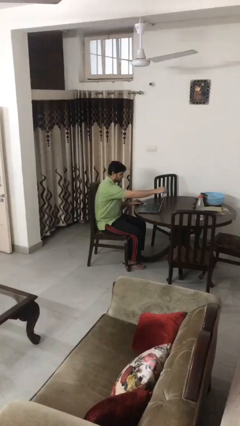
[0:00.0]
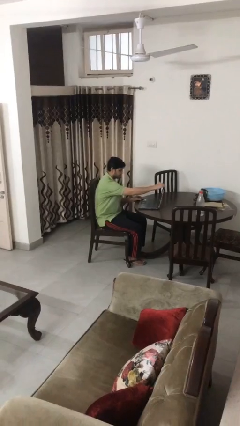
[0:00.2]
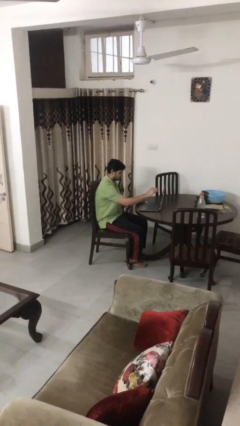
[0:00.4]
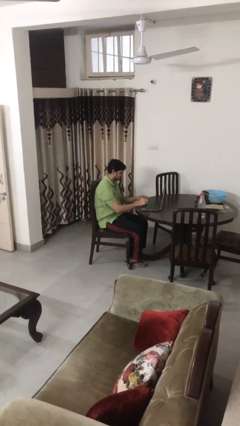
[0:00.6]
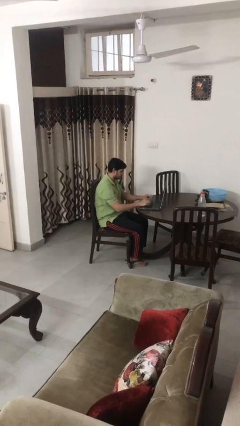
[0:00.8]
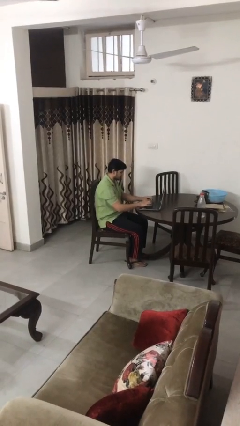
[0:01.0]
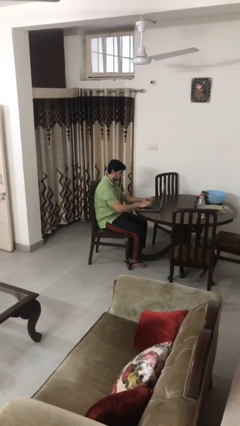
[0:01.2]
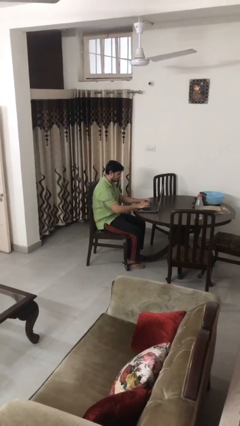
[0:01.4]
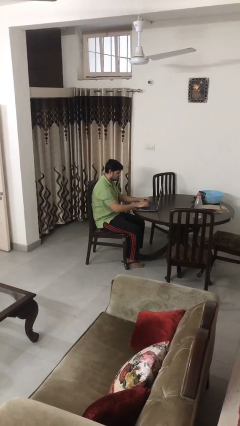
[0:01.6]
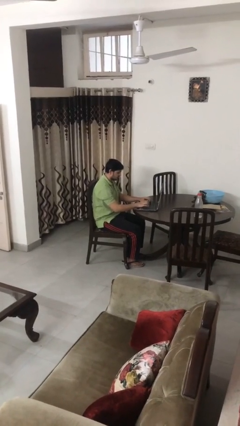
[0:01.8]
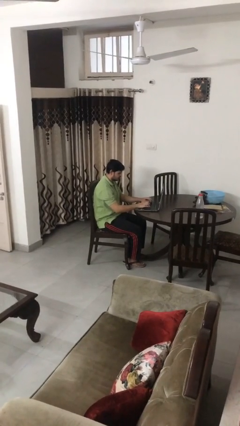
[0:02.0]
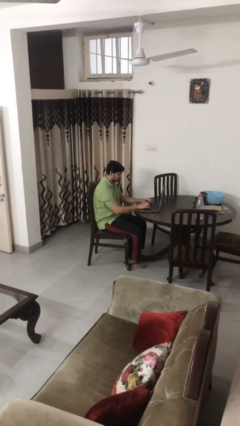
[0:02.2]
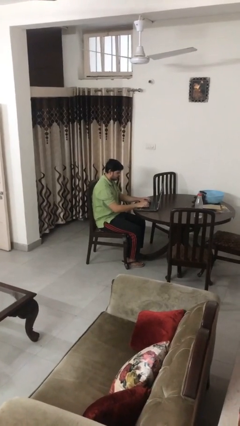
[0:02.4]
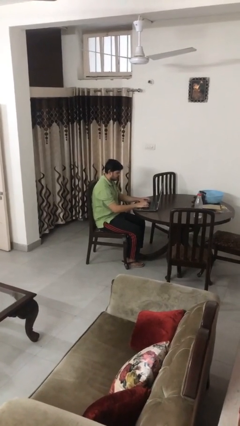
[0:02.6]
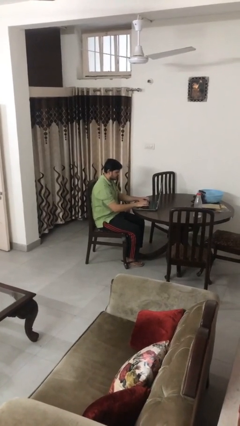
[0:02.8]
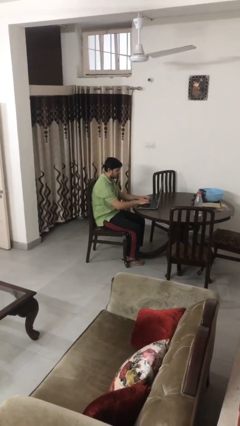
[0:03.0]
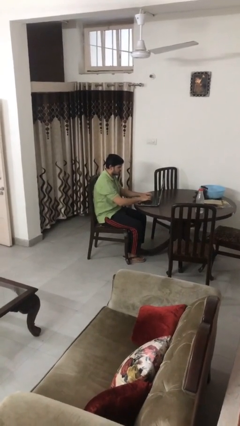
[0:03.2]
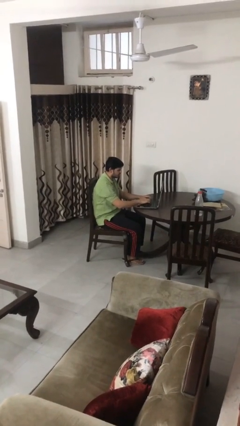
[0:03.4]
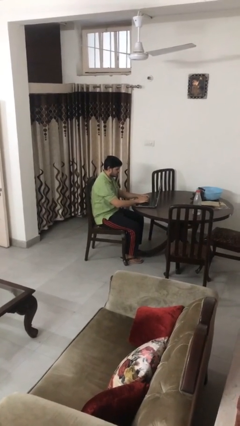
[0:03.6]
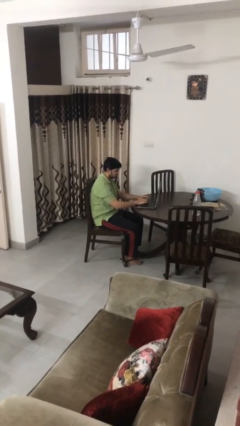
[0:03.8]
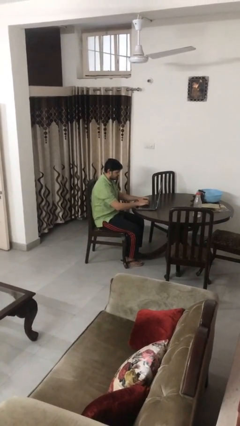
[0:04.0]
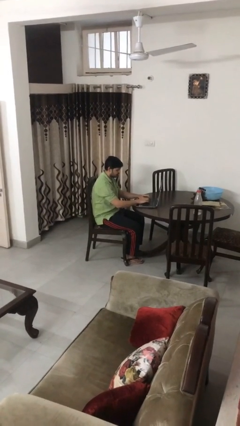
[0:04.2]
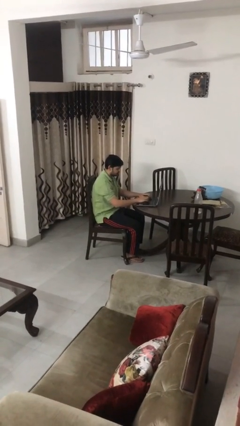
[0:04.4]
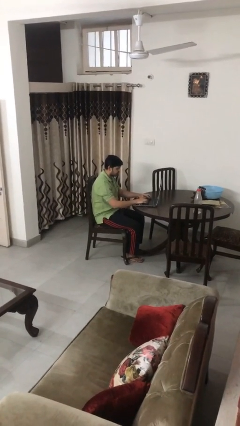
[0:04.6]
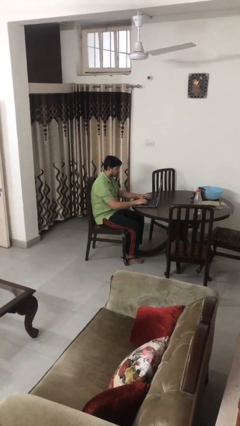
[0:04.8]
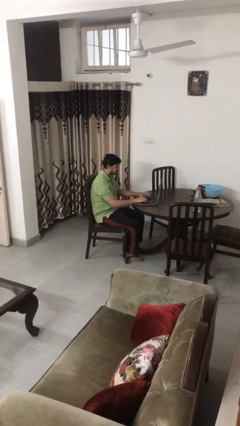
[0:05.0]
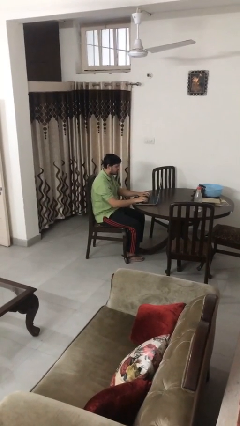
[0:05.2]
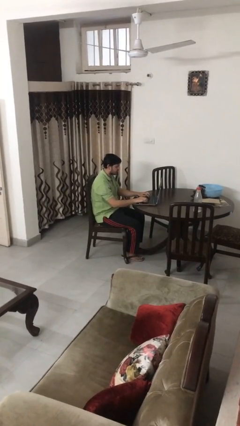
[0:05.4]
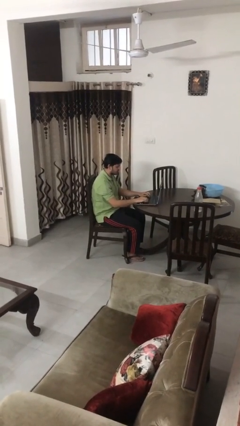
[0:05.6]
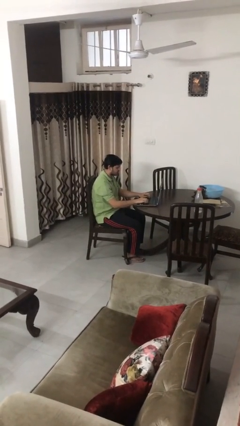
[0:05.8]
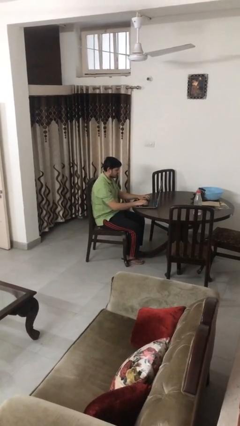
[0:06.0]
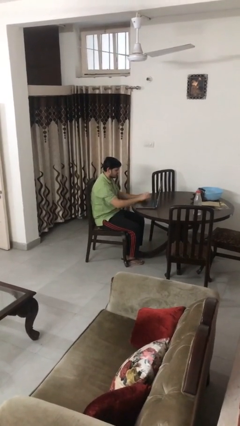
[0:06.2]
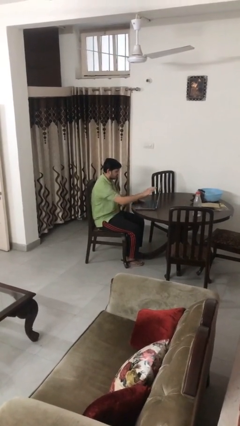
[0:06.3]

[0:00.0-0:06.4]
person interacts with laptop

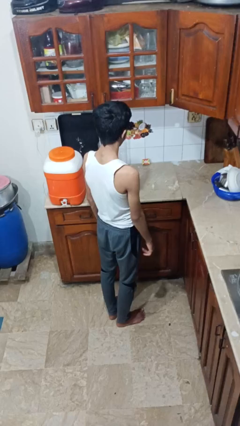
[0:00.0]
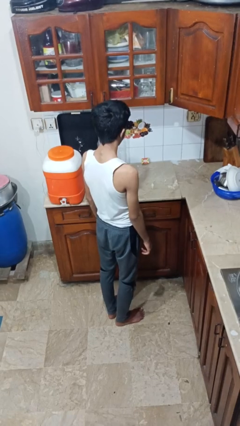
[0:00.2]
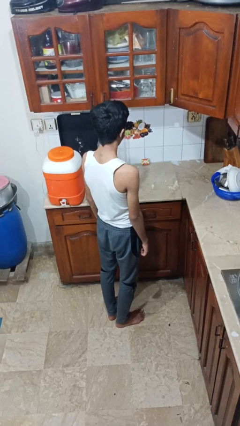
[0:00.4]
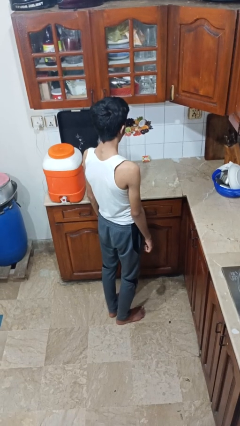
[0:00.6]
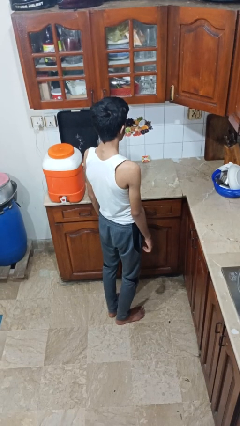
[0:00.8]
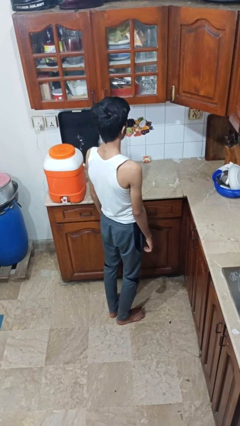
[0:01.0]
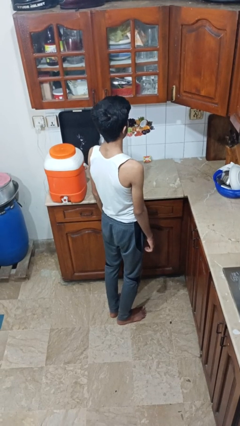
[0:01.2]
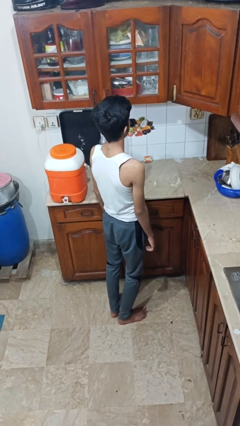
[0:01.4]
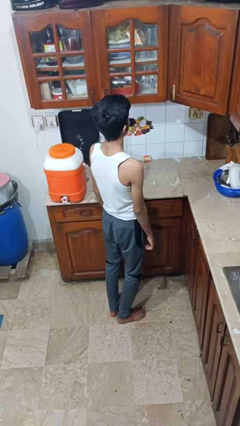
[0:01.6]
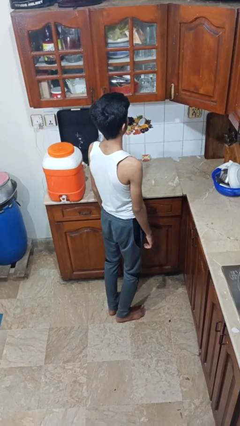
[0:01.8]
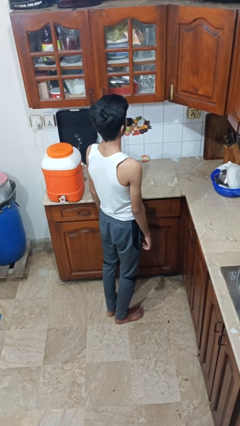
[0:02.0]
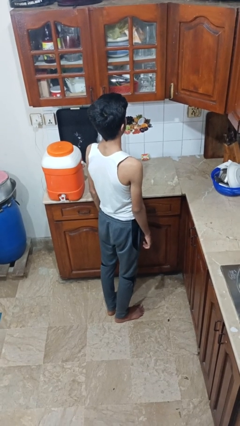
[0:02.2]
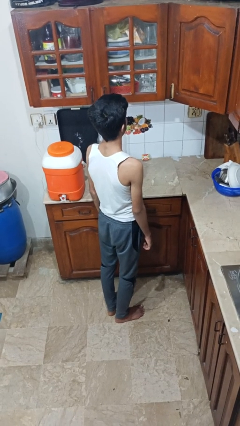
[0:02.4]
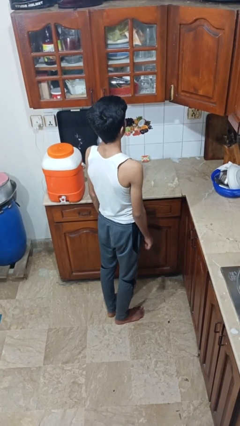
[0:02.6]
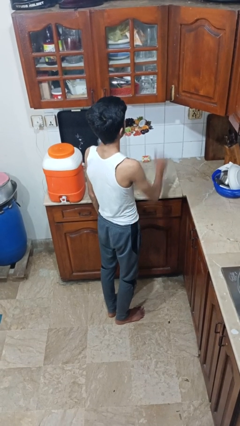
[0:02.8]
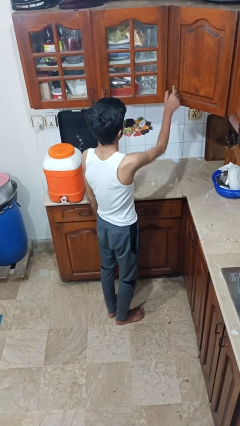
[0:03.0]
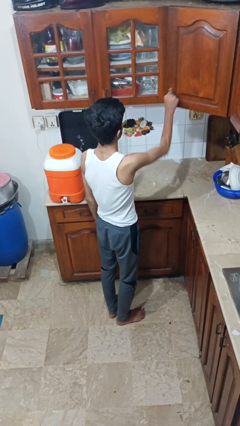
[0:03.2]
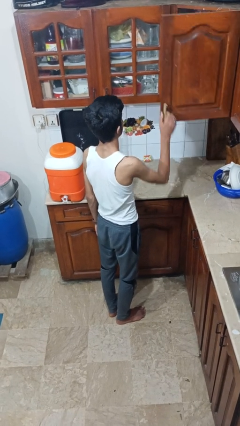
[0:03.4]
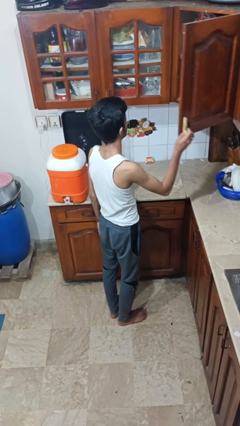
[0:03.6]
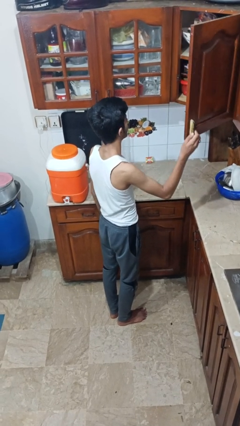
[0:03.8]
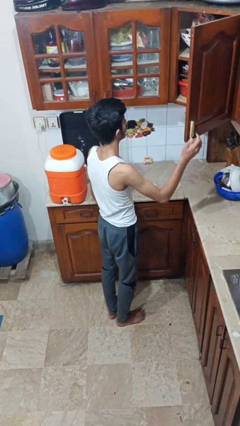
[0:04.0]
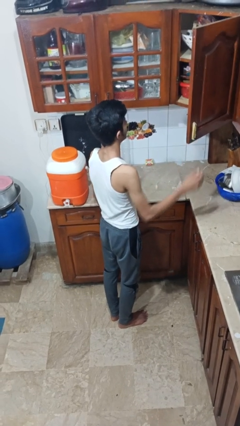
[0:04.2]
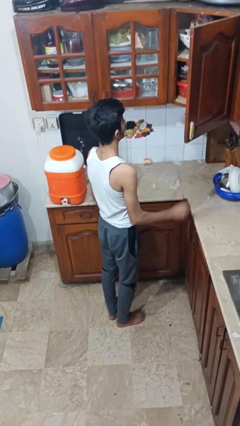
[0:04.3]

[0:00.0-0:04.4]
person closes cabinet

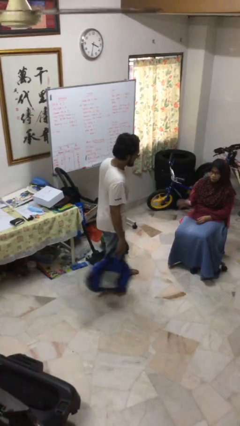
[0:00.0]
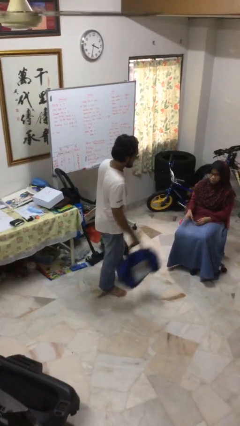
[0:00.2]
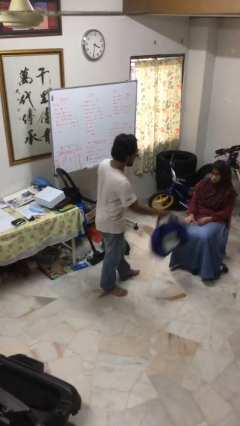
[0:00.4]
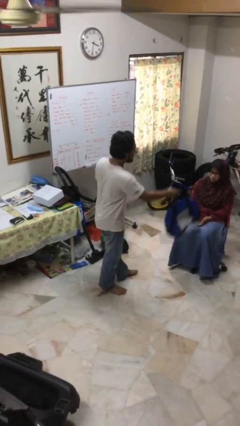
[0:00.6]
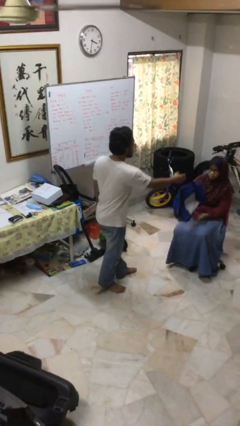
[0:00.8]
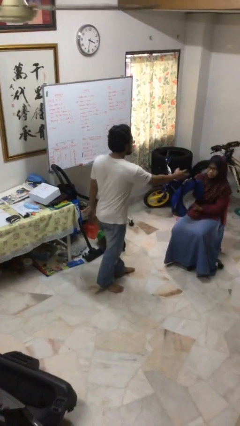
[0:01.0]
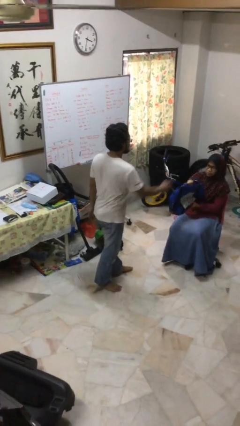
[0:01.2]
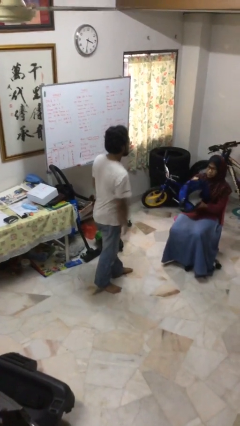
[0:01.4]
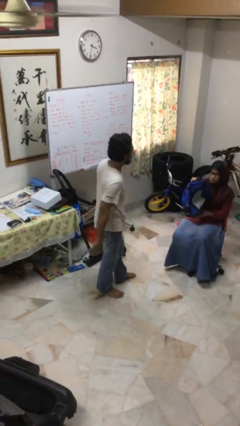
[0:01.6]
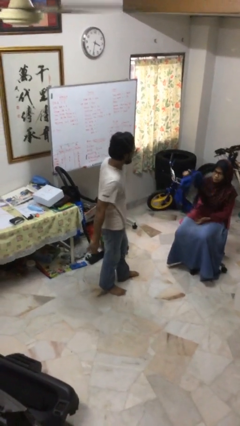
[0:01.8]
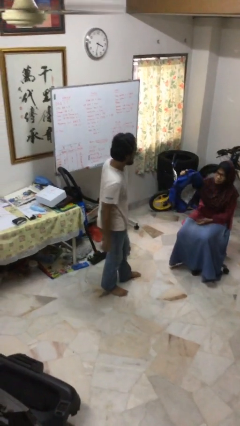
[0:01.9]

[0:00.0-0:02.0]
person transfers object to person

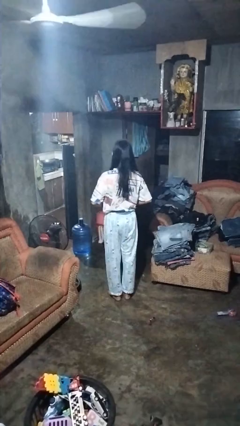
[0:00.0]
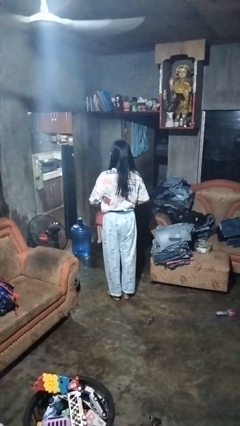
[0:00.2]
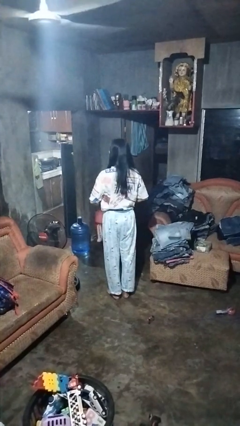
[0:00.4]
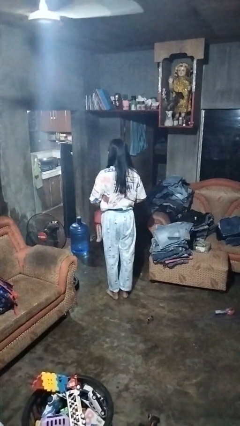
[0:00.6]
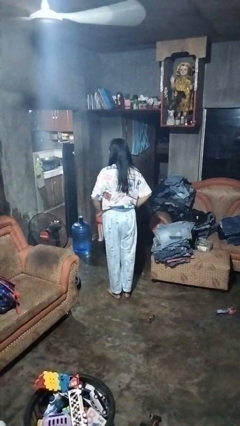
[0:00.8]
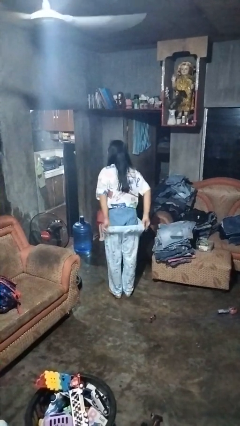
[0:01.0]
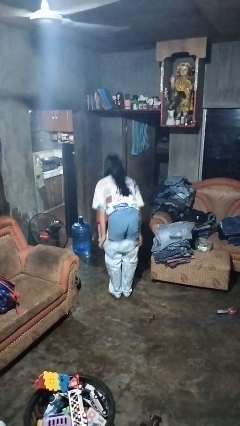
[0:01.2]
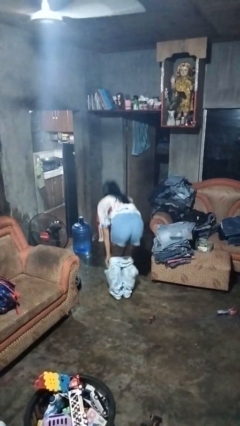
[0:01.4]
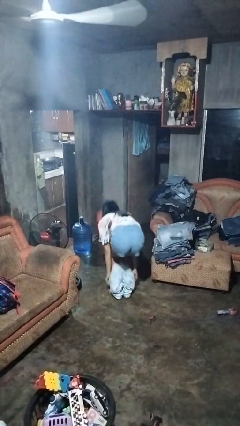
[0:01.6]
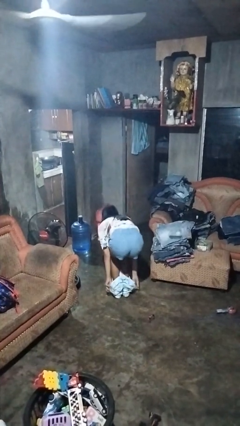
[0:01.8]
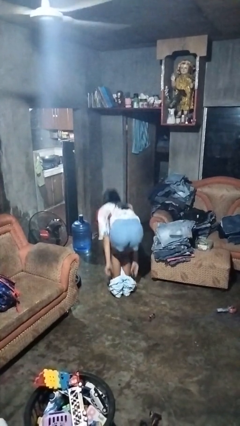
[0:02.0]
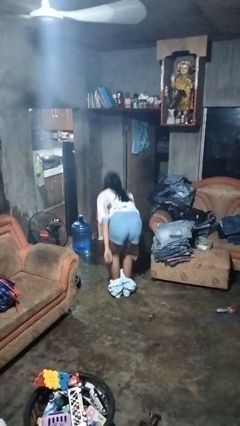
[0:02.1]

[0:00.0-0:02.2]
person takes off pants

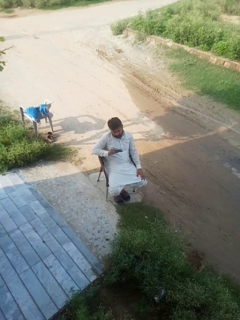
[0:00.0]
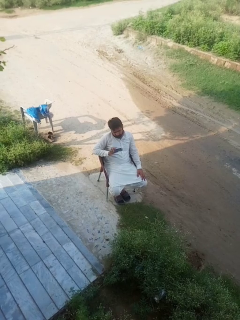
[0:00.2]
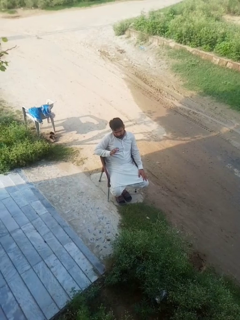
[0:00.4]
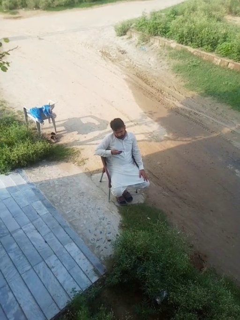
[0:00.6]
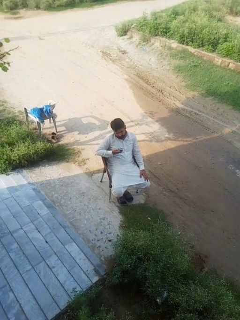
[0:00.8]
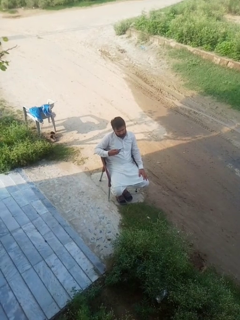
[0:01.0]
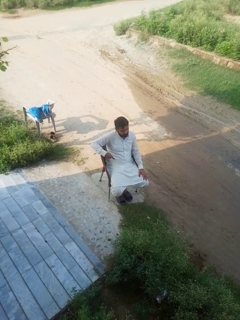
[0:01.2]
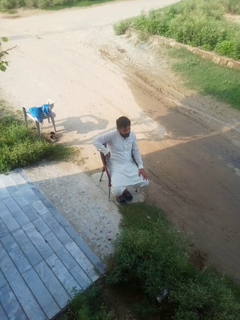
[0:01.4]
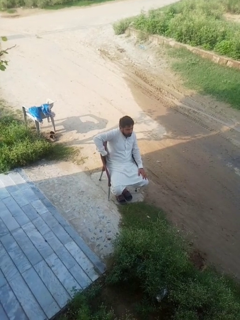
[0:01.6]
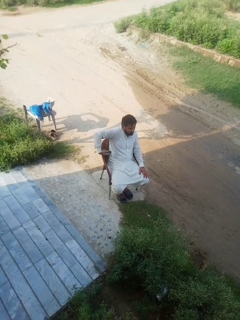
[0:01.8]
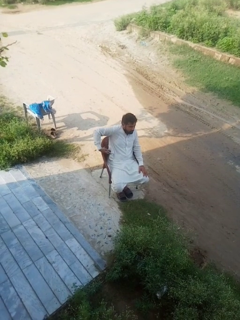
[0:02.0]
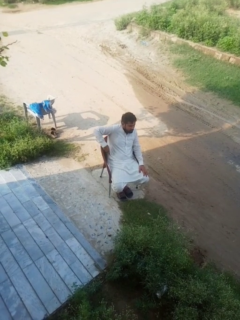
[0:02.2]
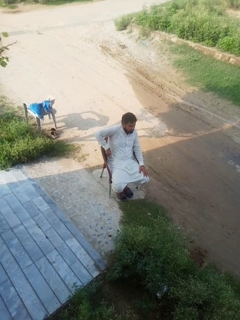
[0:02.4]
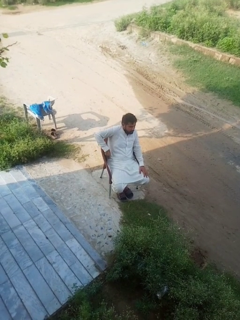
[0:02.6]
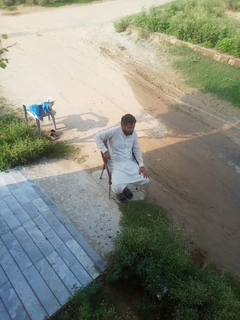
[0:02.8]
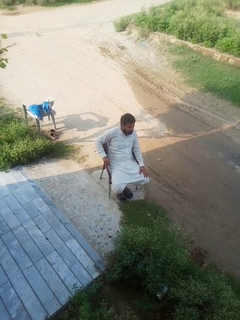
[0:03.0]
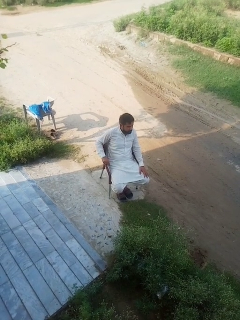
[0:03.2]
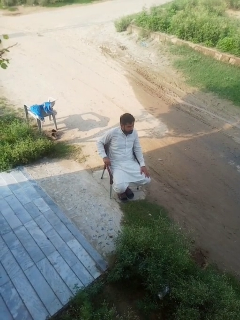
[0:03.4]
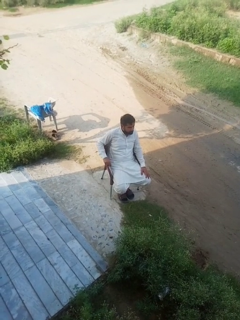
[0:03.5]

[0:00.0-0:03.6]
person puts phone into pocket
